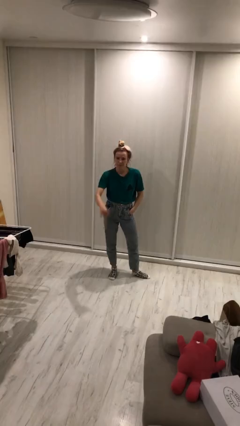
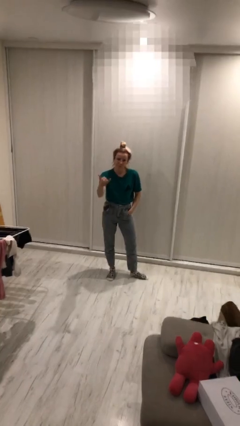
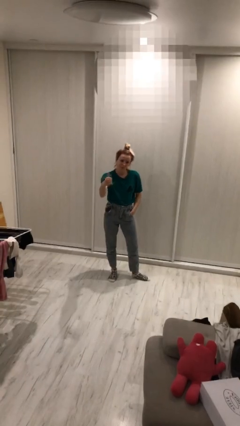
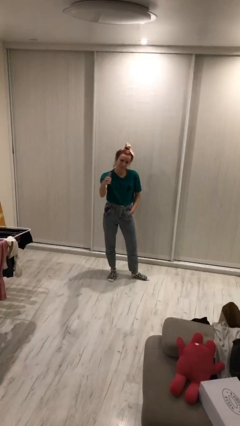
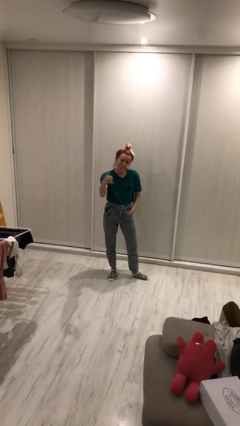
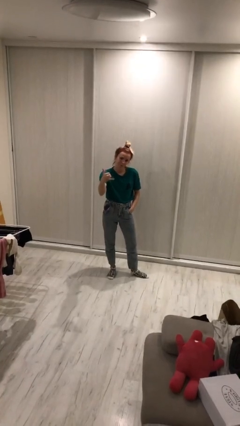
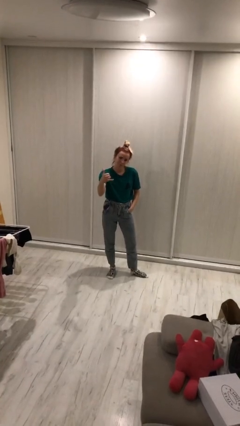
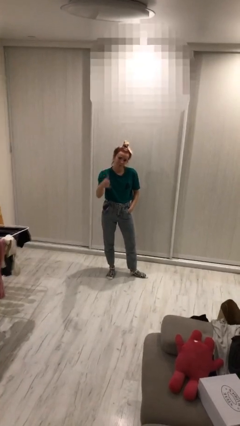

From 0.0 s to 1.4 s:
person gestures hang loose

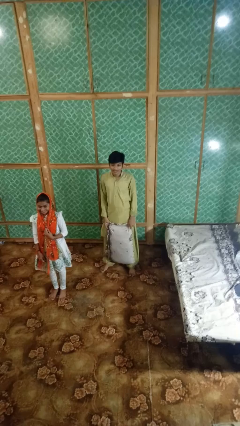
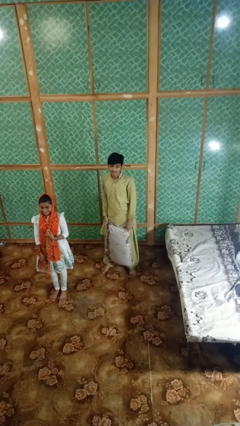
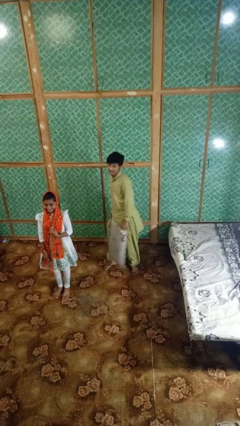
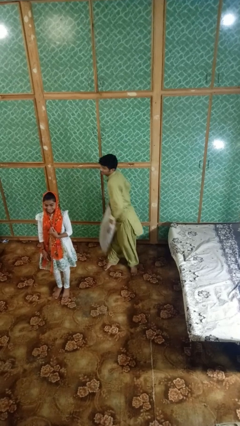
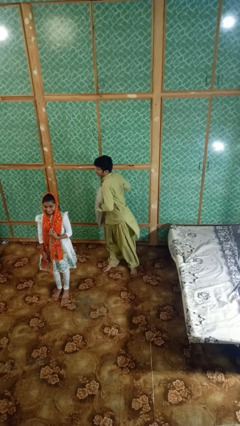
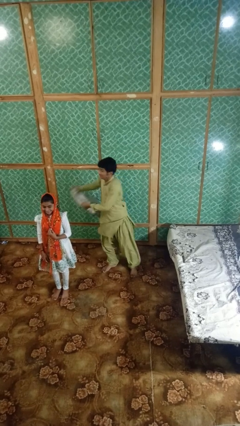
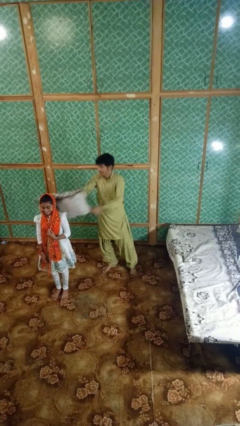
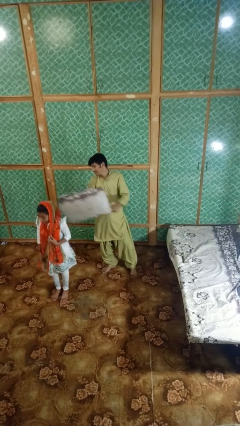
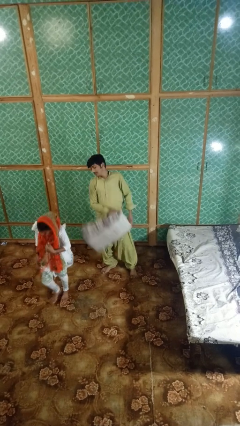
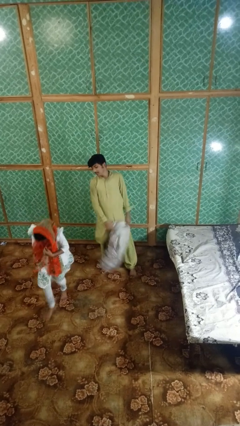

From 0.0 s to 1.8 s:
person hits person with pillow

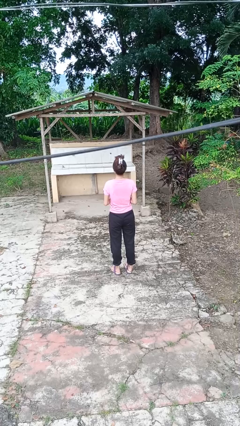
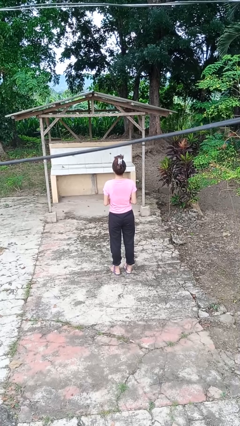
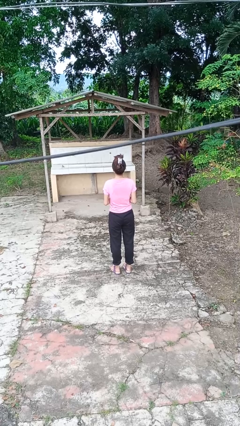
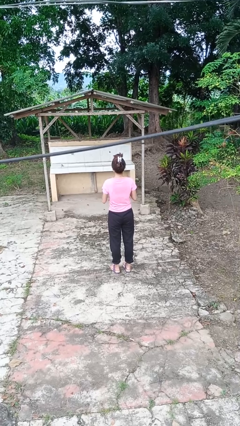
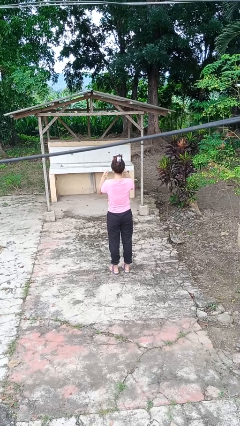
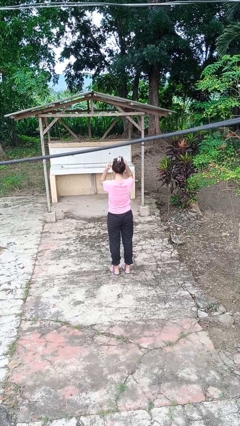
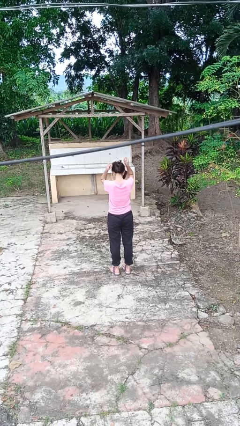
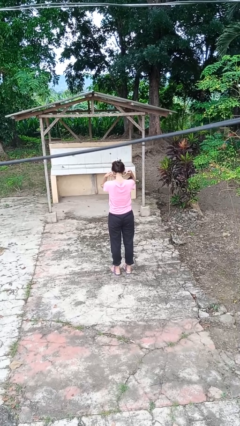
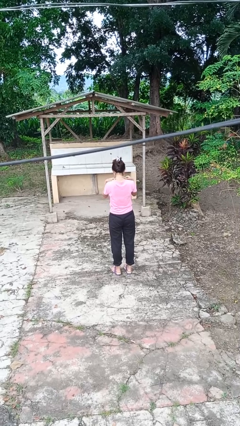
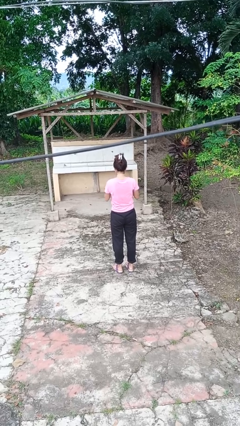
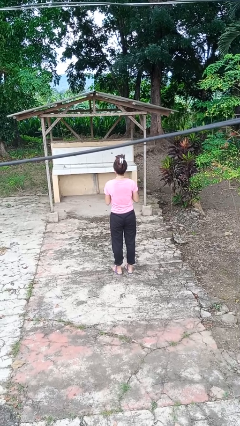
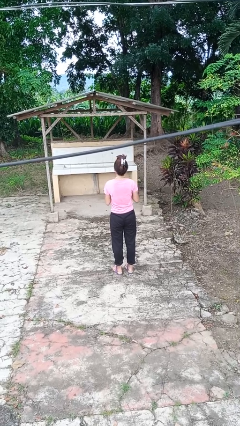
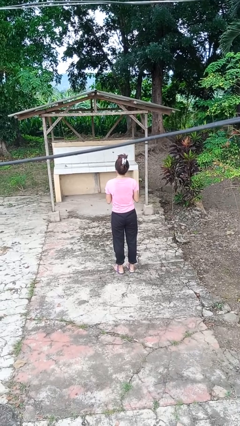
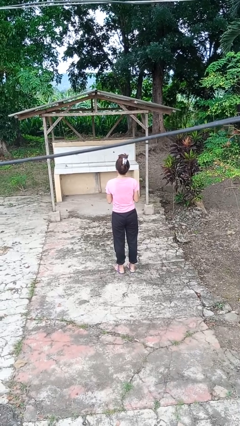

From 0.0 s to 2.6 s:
person puts on necklace

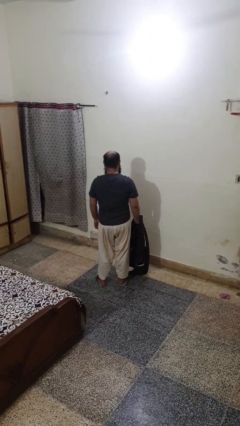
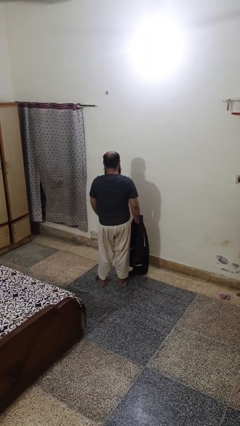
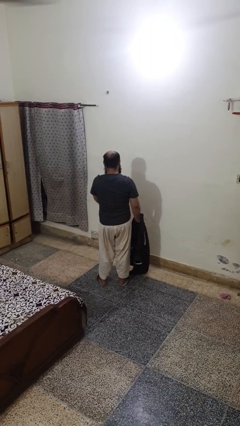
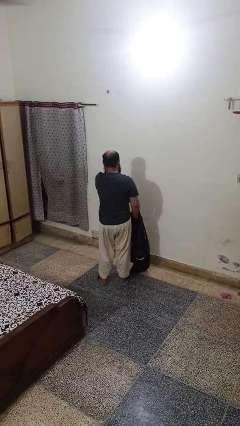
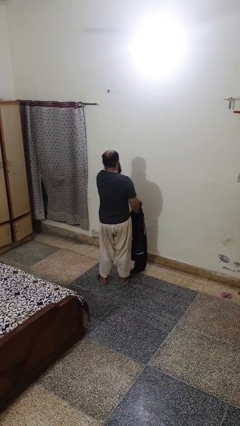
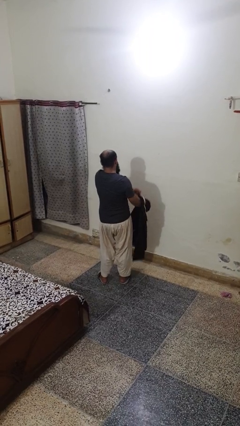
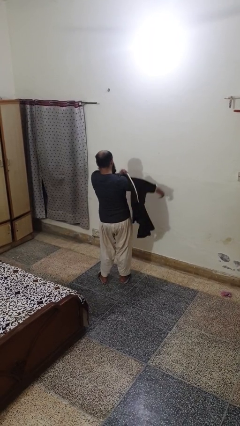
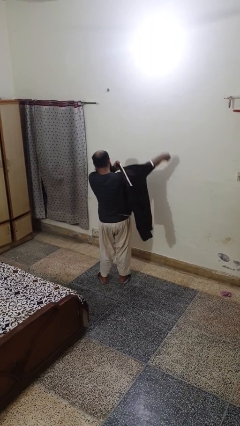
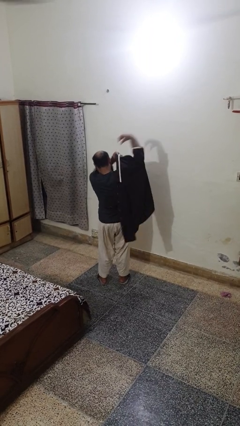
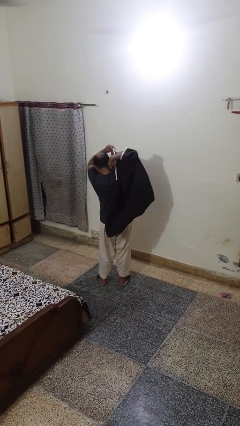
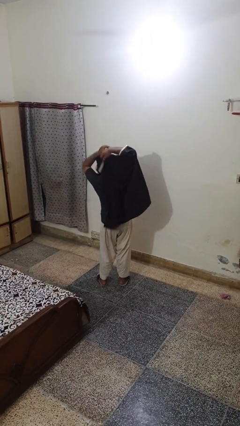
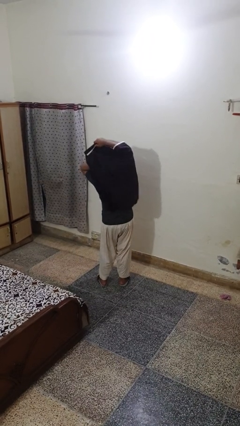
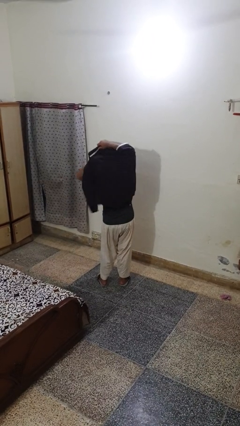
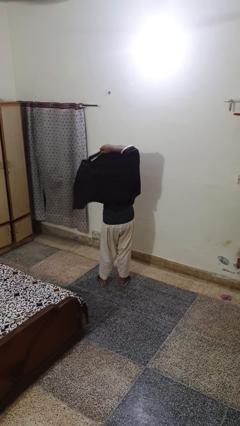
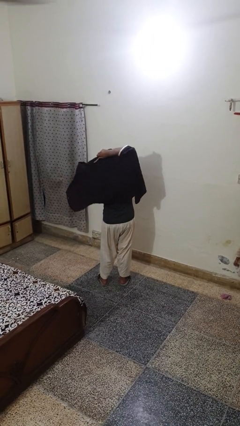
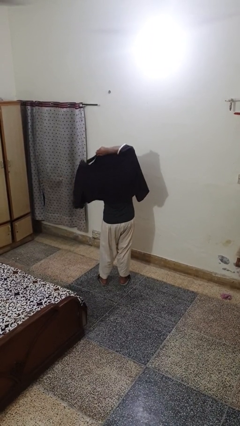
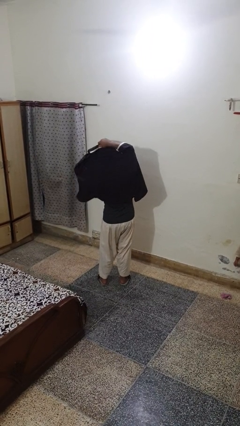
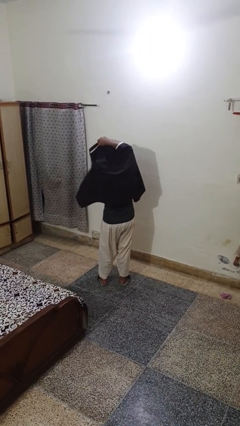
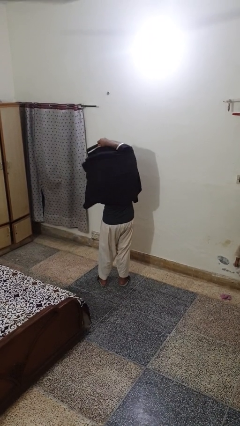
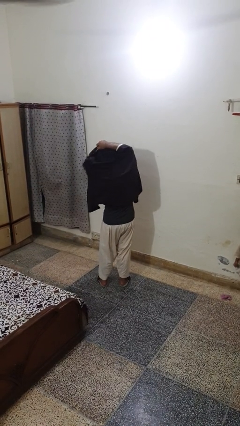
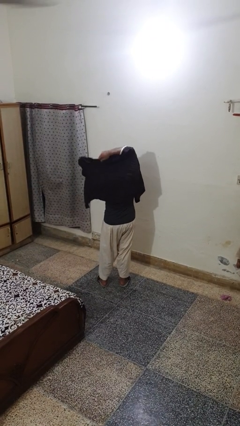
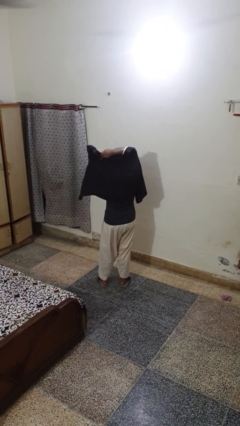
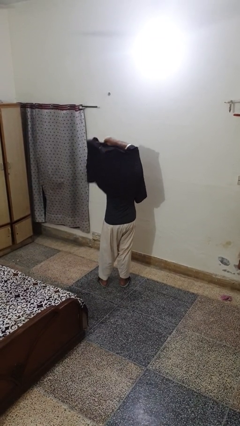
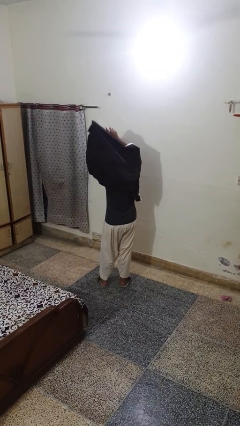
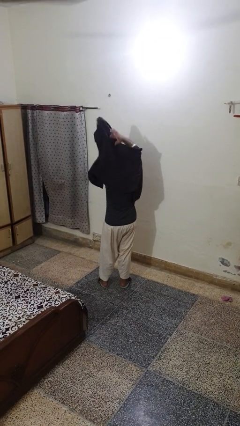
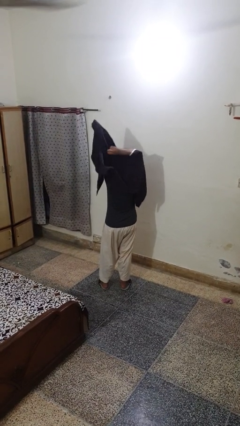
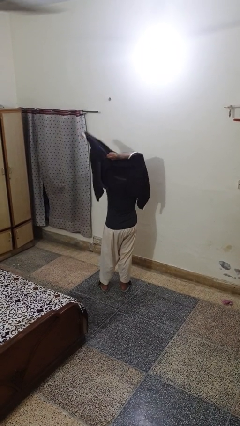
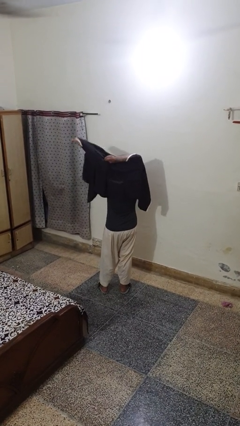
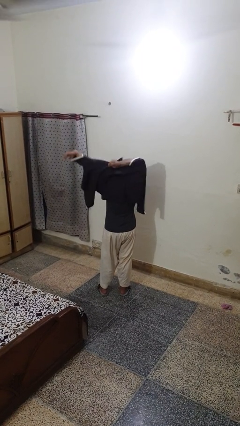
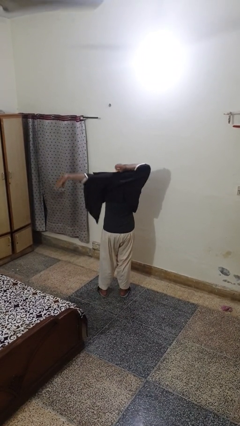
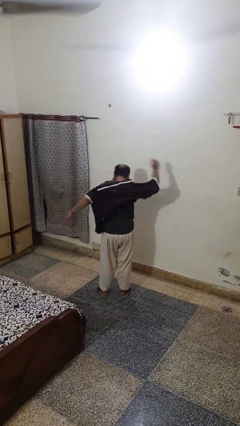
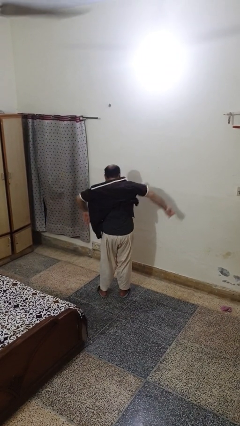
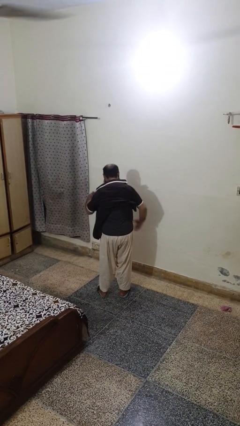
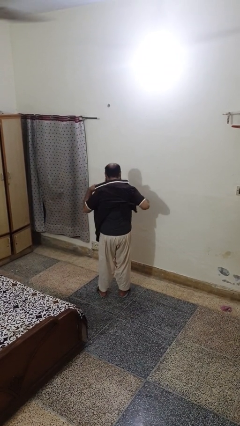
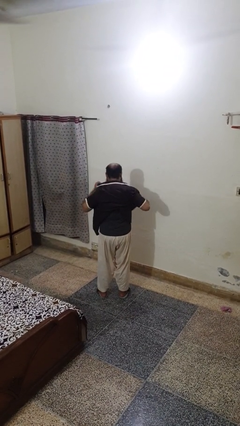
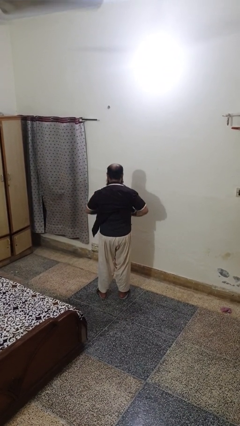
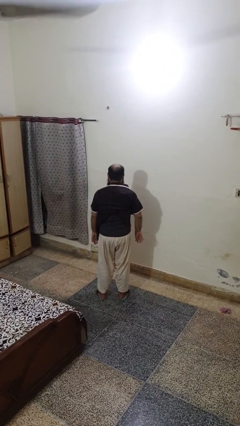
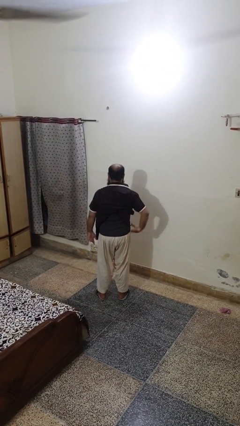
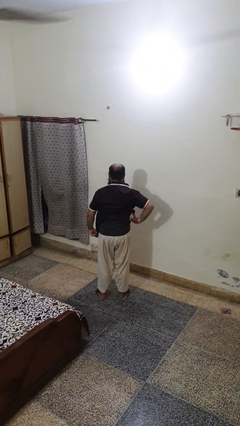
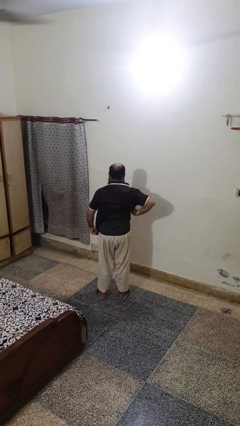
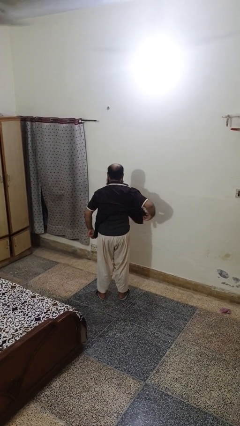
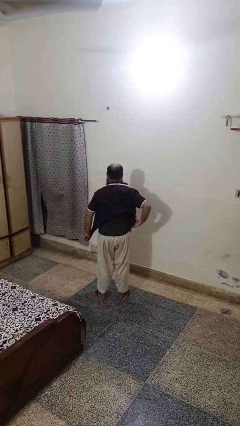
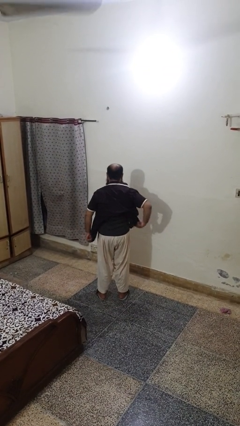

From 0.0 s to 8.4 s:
person puts on shirt

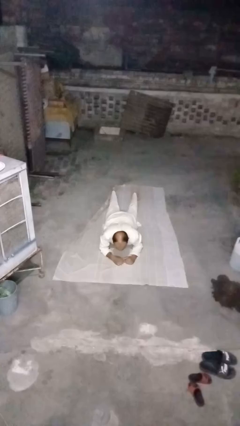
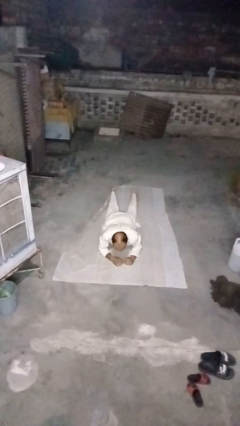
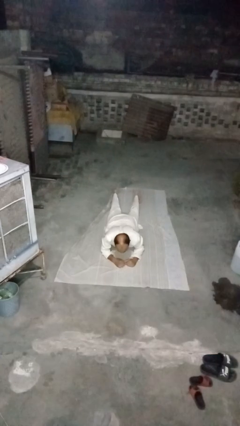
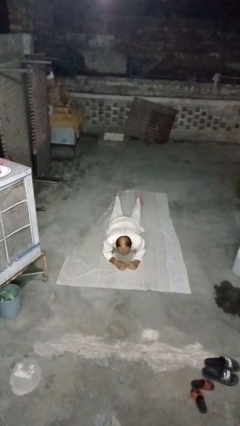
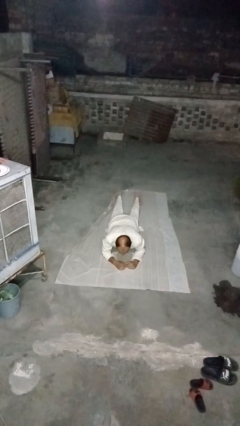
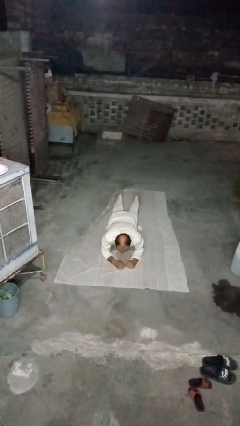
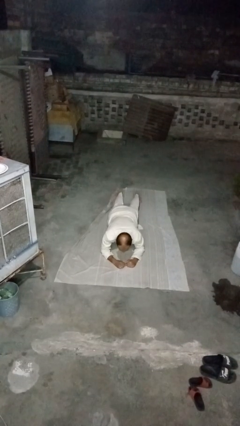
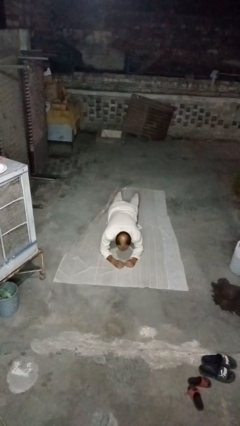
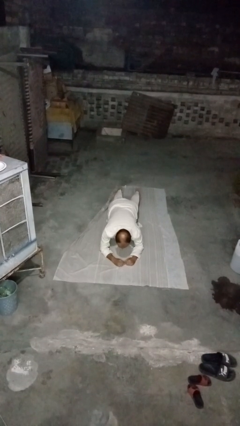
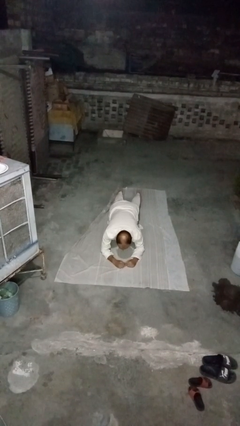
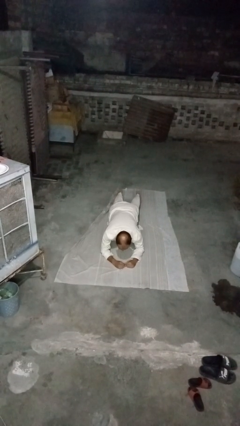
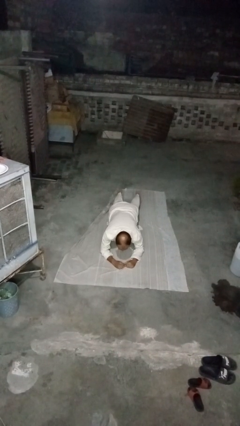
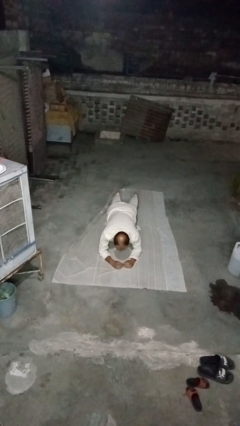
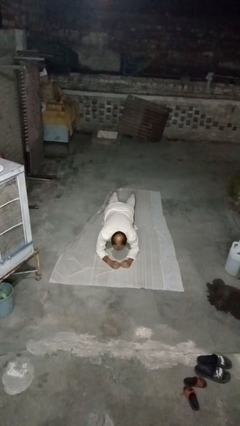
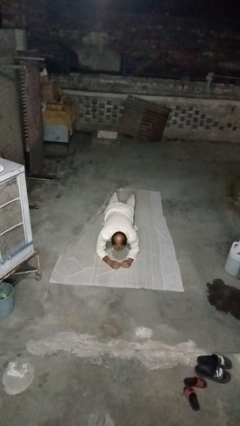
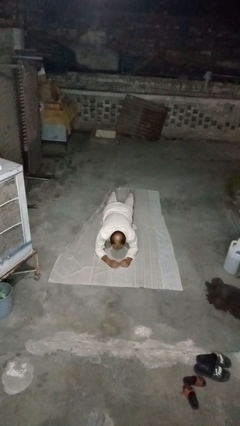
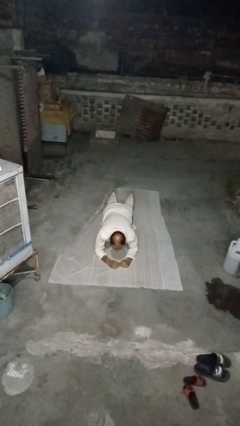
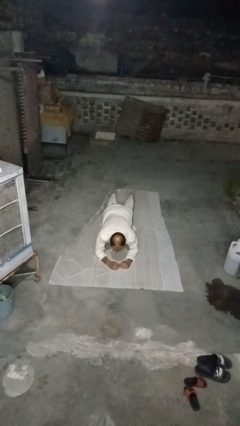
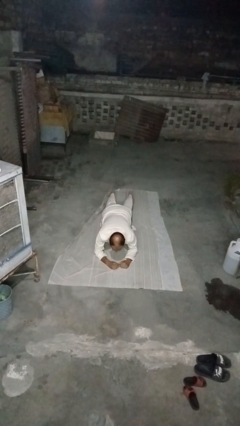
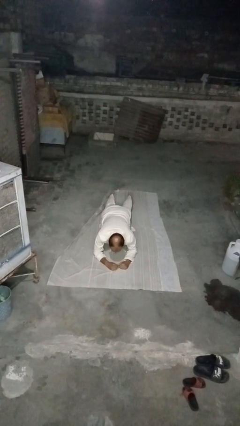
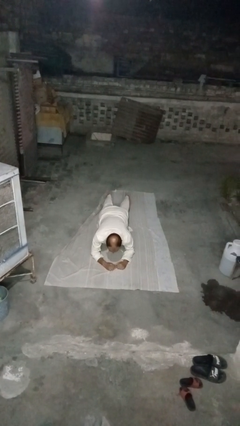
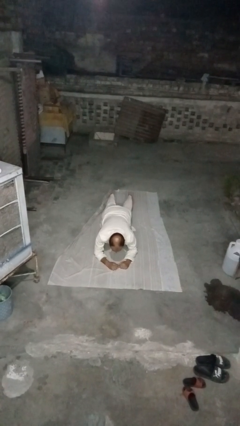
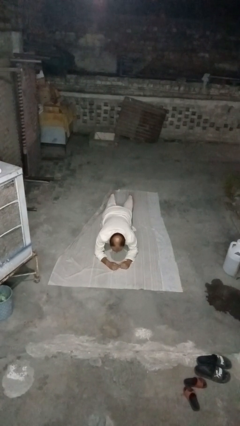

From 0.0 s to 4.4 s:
person exercises with plank
